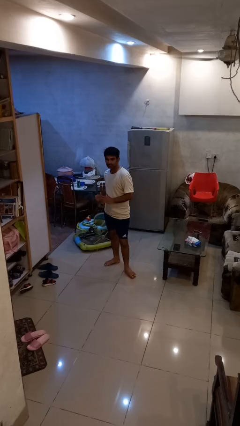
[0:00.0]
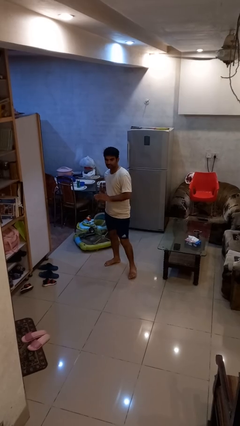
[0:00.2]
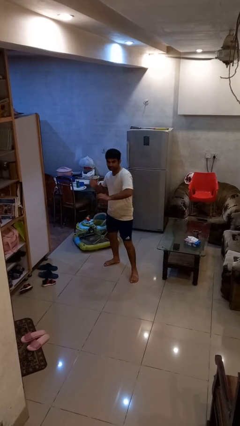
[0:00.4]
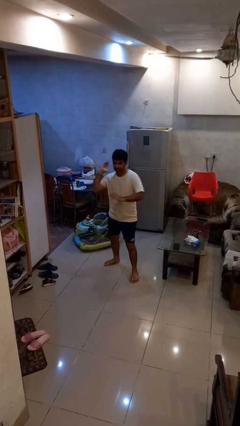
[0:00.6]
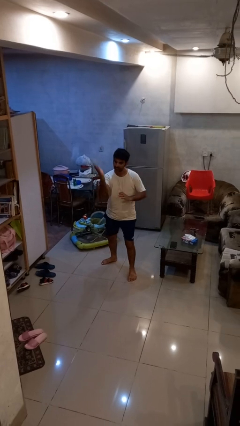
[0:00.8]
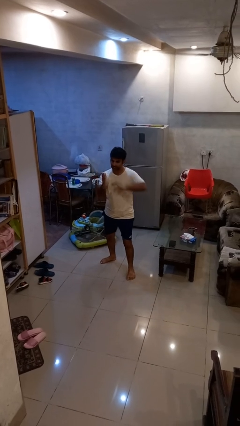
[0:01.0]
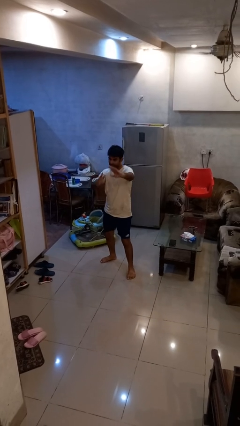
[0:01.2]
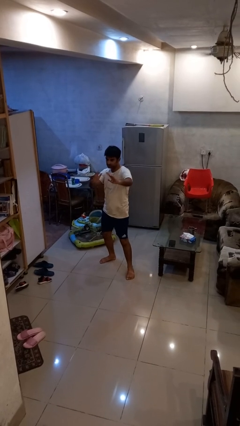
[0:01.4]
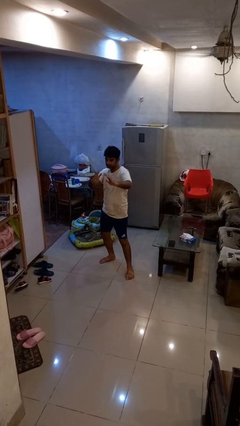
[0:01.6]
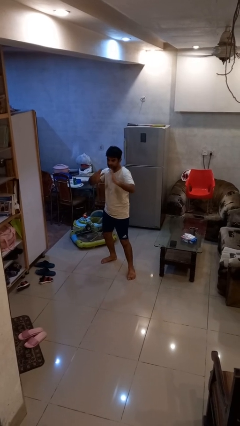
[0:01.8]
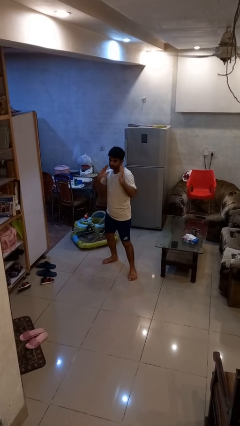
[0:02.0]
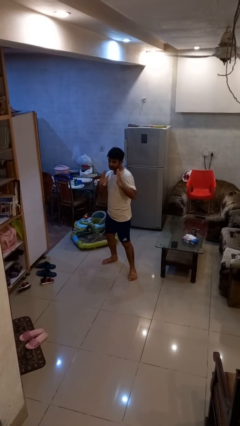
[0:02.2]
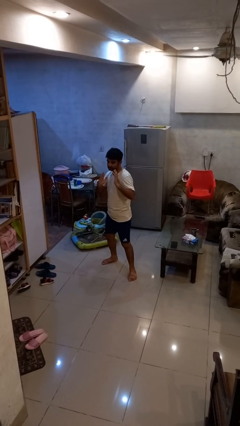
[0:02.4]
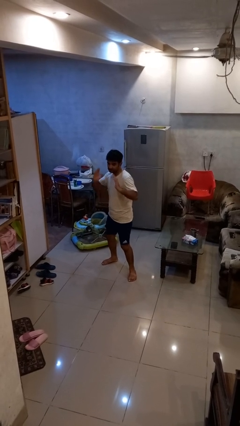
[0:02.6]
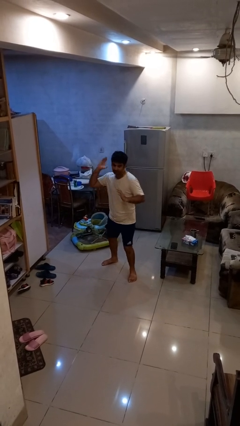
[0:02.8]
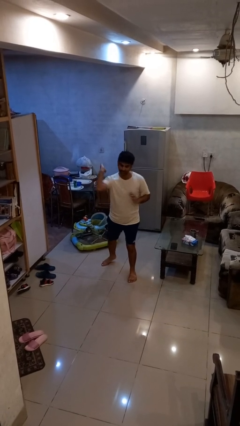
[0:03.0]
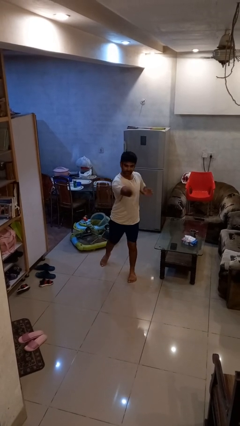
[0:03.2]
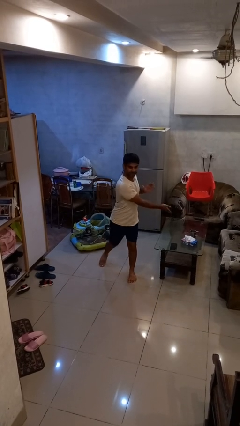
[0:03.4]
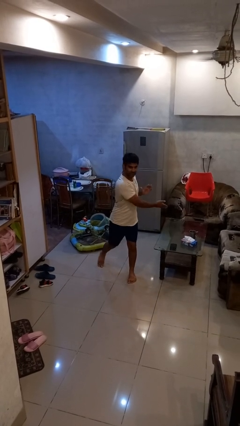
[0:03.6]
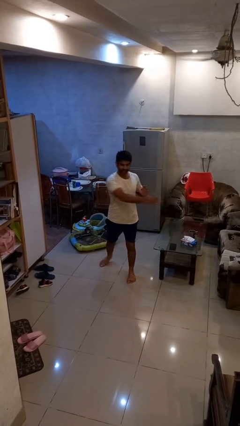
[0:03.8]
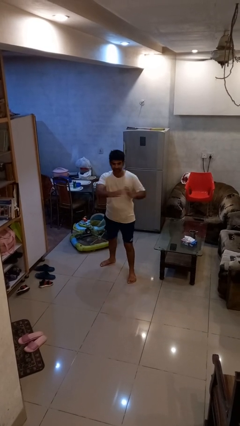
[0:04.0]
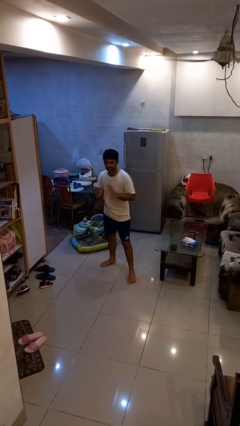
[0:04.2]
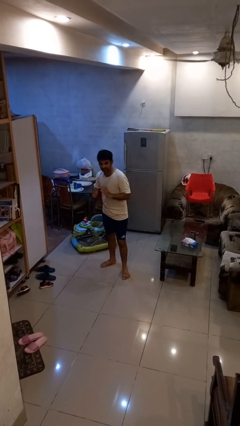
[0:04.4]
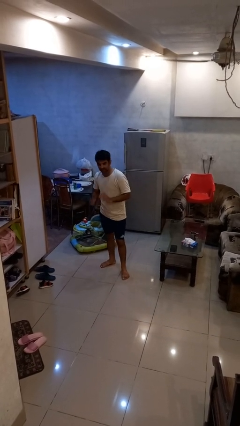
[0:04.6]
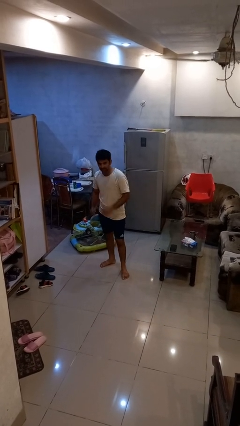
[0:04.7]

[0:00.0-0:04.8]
person karate chop

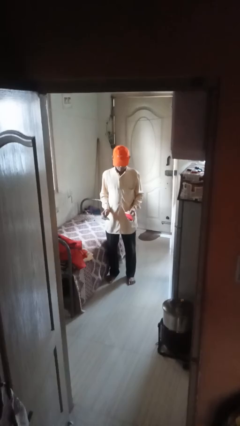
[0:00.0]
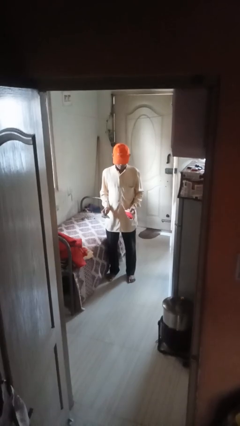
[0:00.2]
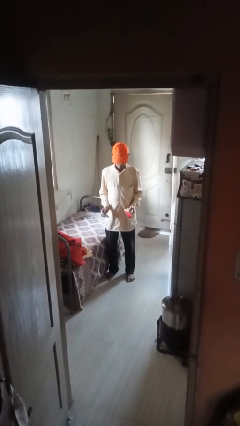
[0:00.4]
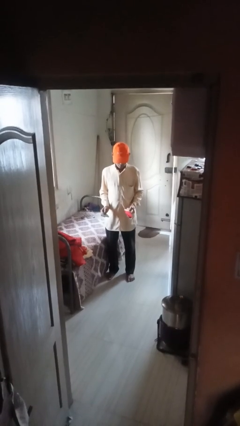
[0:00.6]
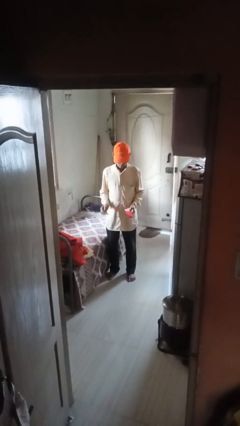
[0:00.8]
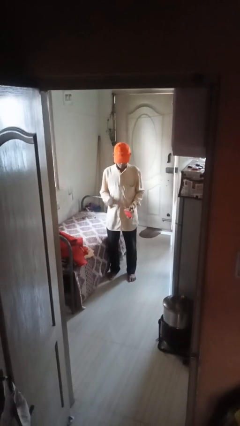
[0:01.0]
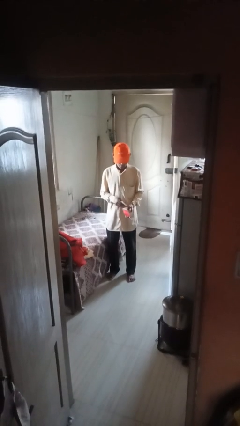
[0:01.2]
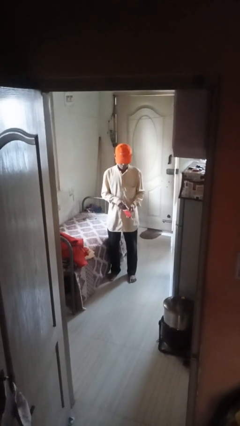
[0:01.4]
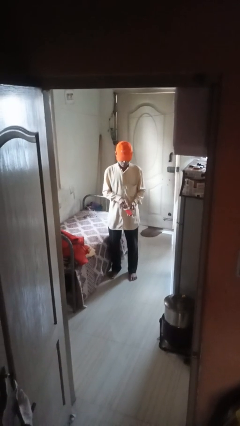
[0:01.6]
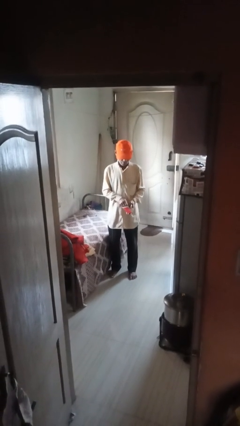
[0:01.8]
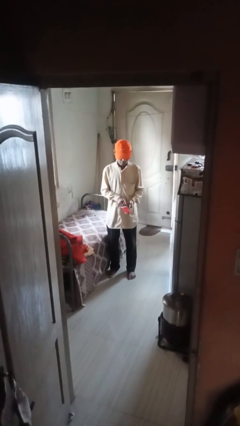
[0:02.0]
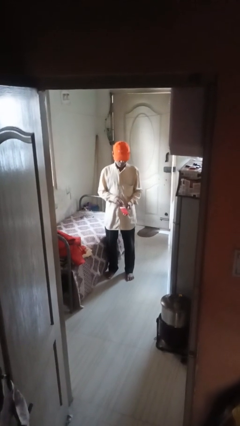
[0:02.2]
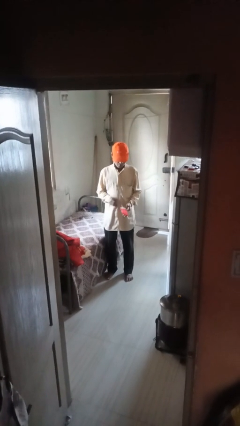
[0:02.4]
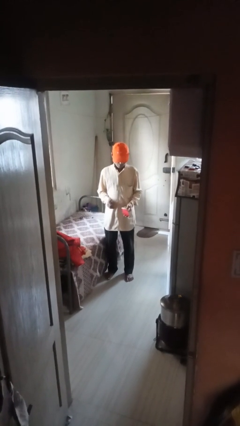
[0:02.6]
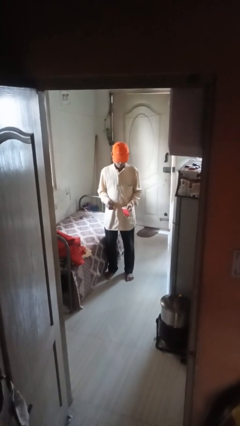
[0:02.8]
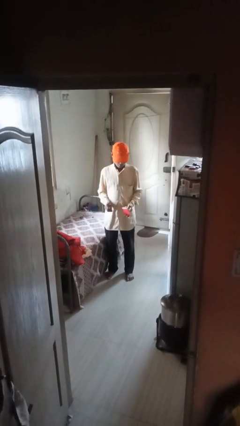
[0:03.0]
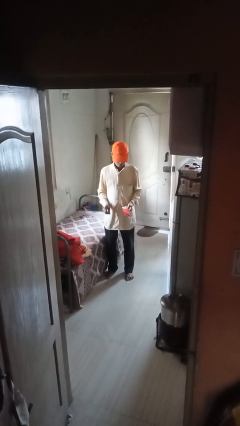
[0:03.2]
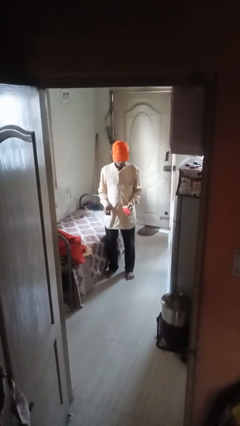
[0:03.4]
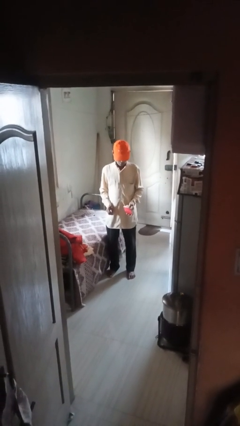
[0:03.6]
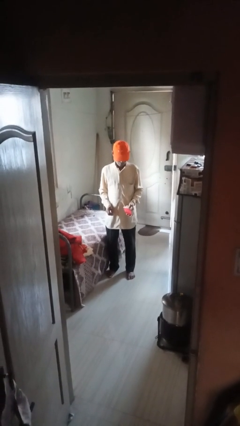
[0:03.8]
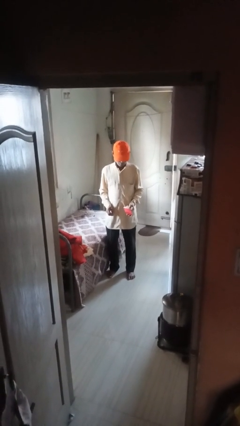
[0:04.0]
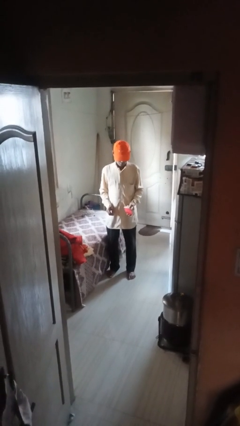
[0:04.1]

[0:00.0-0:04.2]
person puts object into purse

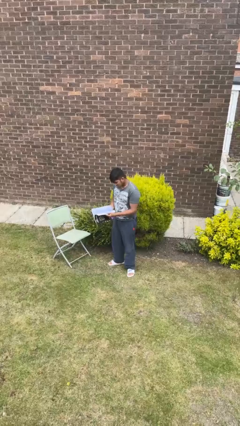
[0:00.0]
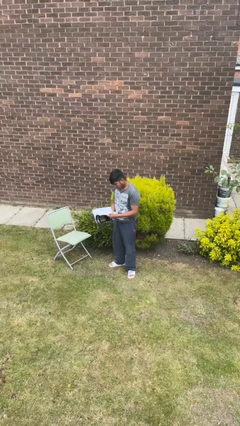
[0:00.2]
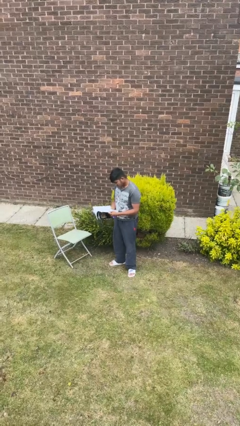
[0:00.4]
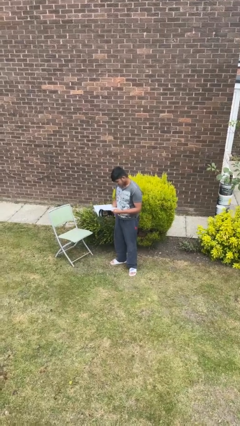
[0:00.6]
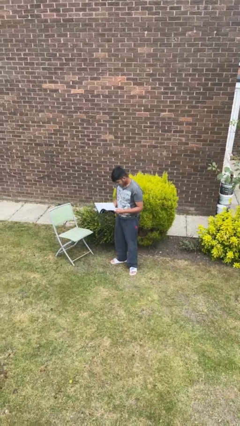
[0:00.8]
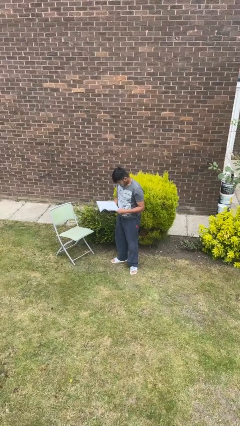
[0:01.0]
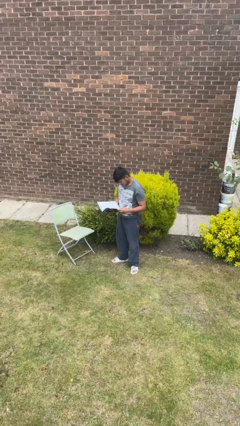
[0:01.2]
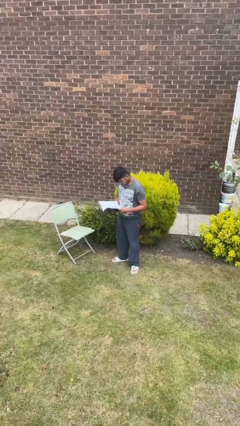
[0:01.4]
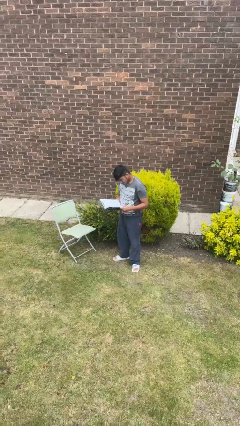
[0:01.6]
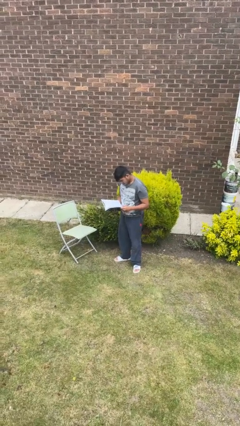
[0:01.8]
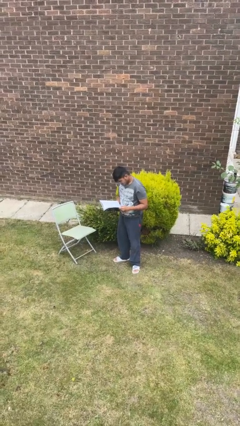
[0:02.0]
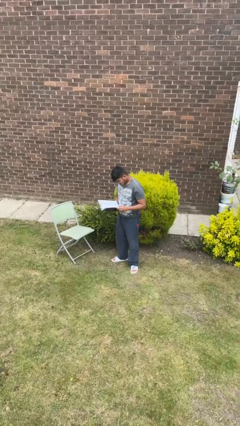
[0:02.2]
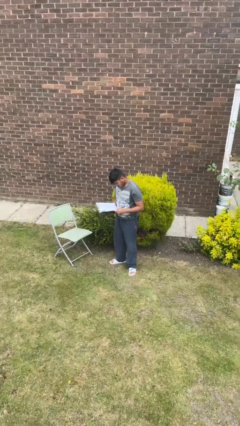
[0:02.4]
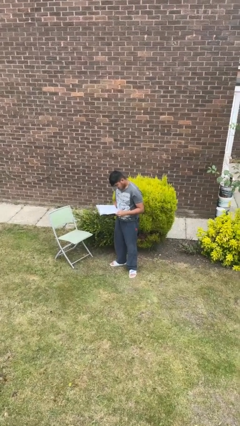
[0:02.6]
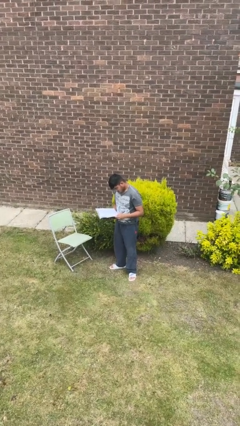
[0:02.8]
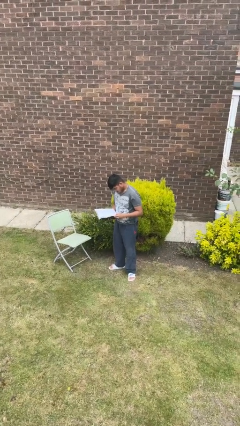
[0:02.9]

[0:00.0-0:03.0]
person reads book

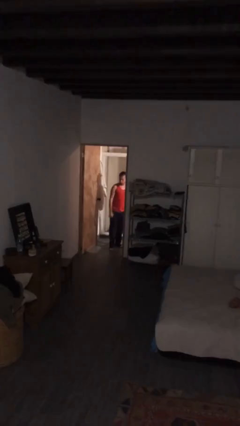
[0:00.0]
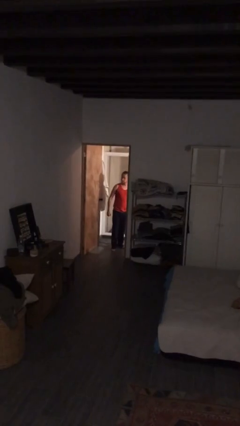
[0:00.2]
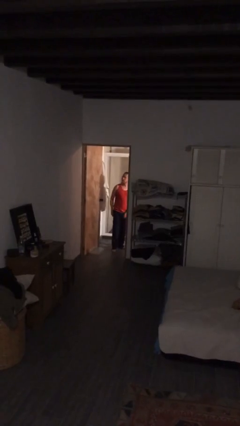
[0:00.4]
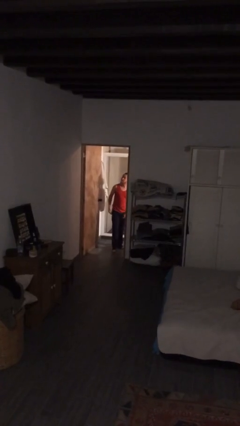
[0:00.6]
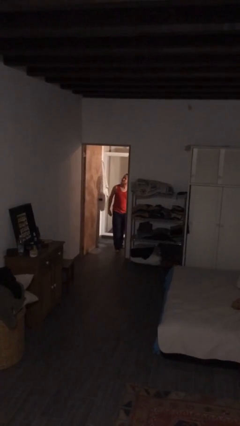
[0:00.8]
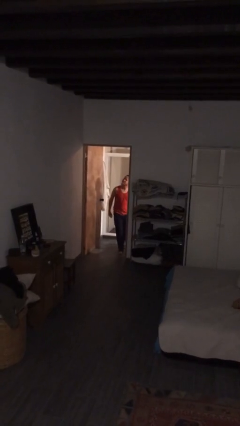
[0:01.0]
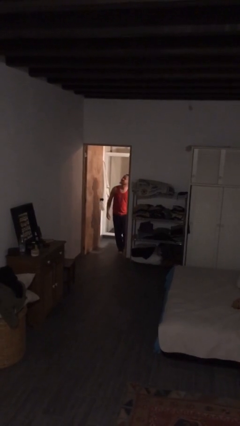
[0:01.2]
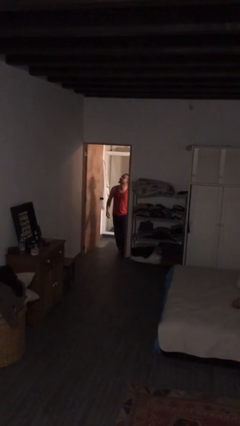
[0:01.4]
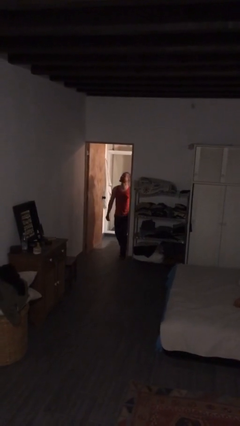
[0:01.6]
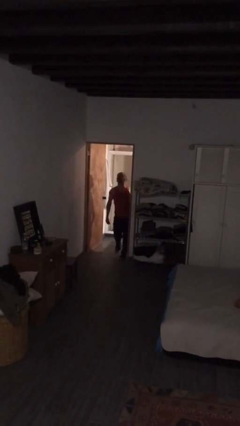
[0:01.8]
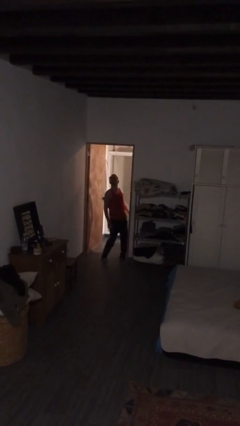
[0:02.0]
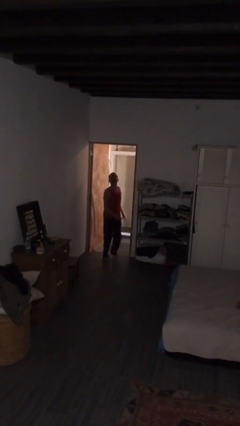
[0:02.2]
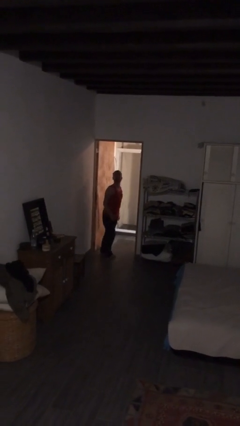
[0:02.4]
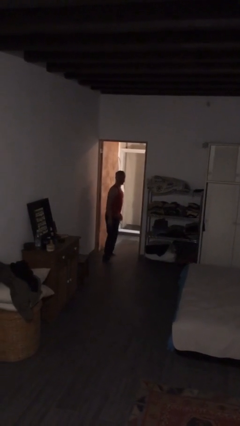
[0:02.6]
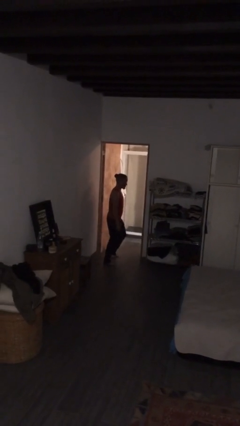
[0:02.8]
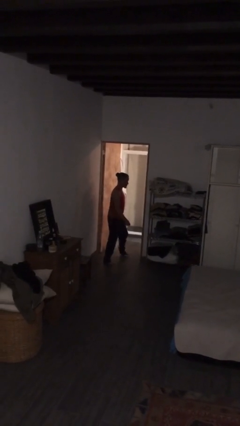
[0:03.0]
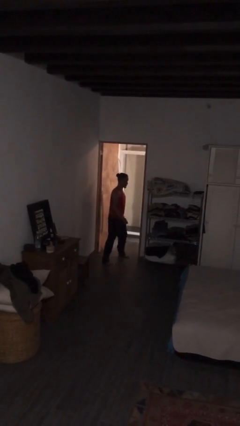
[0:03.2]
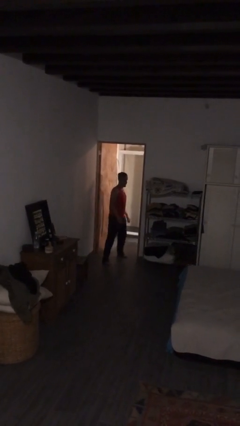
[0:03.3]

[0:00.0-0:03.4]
person bumps into wall

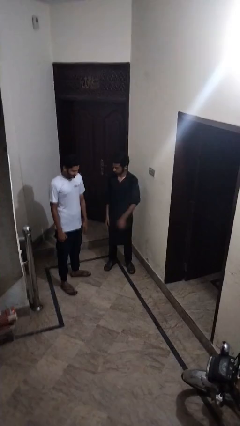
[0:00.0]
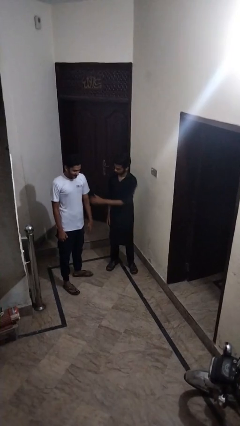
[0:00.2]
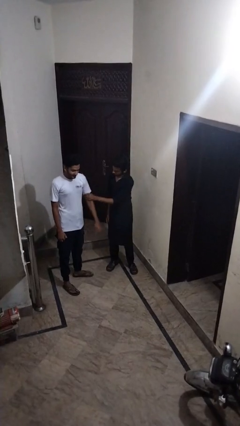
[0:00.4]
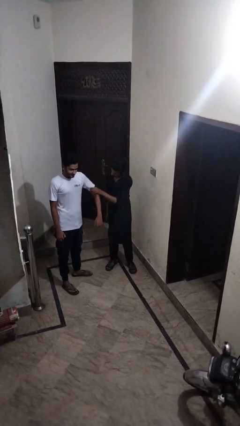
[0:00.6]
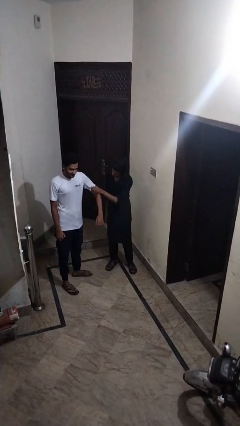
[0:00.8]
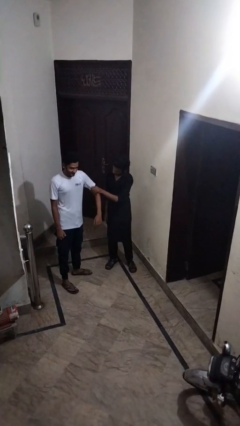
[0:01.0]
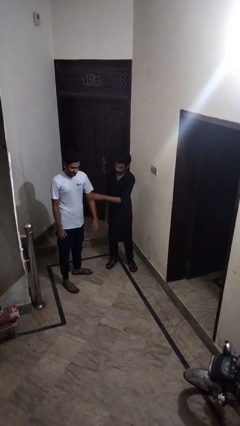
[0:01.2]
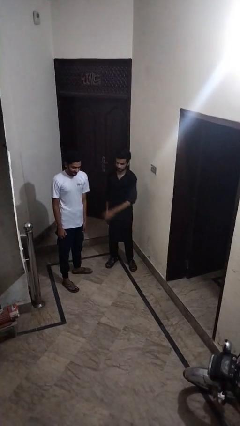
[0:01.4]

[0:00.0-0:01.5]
person grabs person by bicep

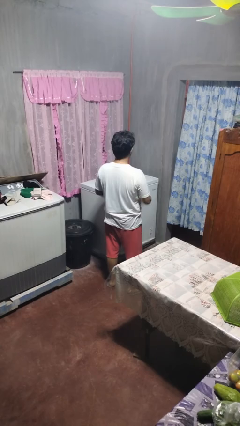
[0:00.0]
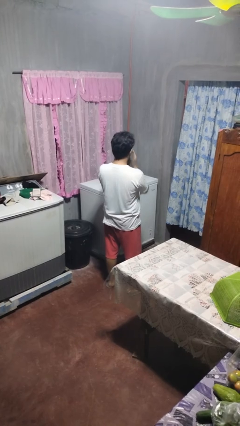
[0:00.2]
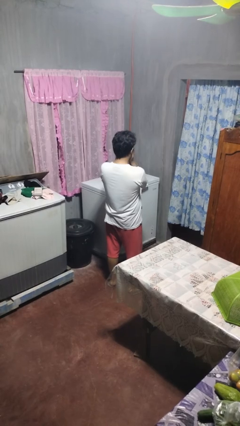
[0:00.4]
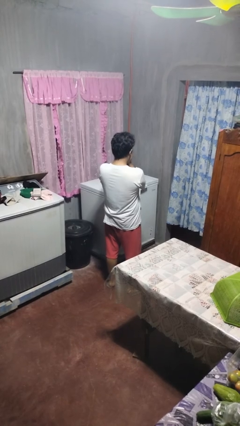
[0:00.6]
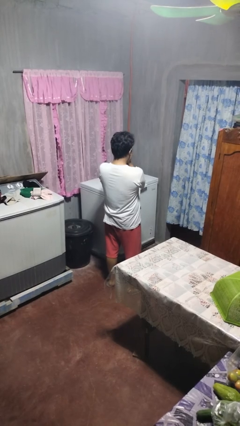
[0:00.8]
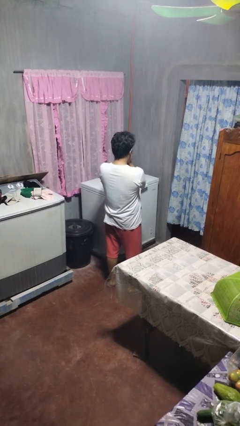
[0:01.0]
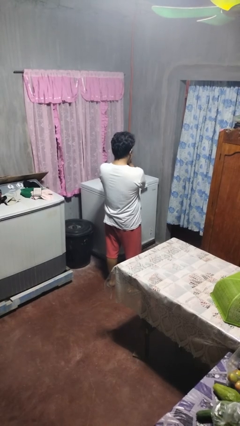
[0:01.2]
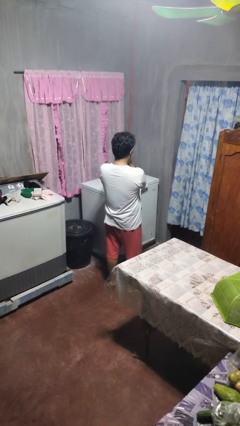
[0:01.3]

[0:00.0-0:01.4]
person covers face with hands
